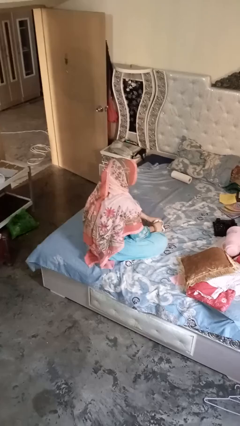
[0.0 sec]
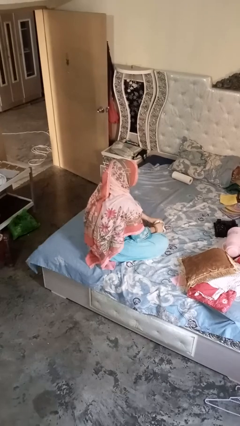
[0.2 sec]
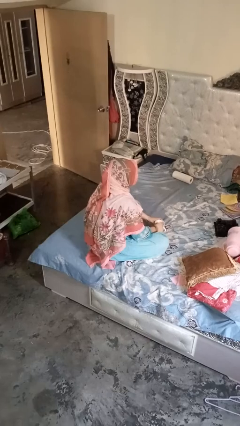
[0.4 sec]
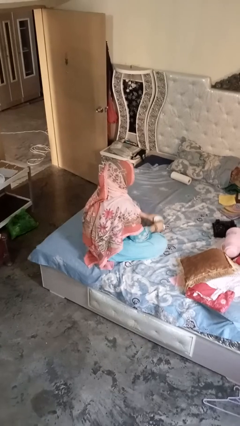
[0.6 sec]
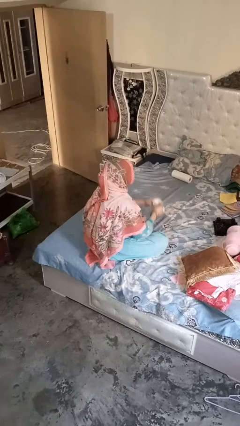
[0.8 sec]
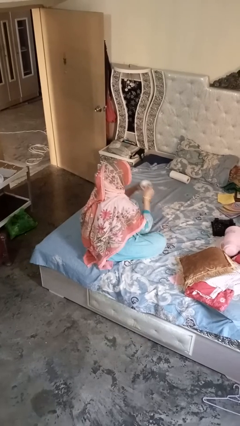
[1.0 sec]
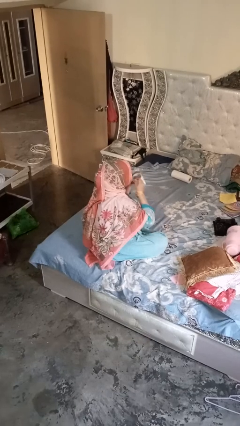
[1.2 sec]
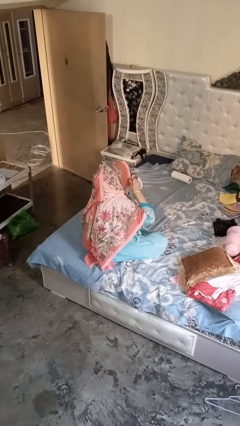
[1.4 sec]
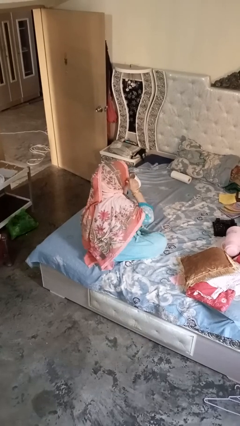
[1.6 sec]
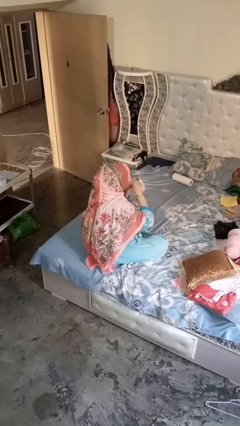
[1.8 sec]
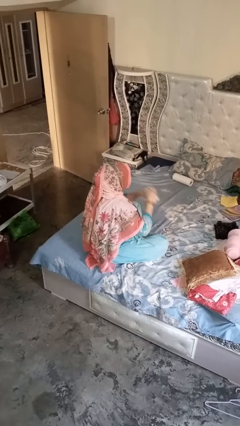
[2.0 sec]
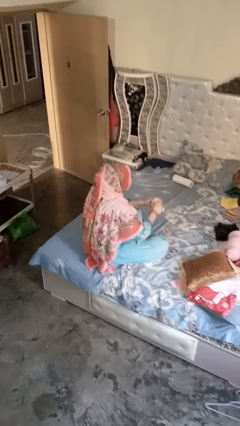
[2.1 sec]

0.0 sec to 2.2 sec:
person drinks from mug

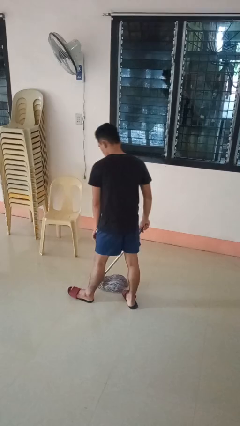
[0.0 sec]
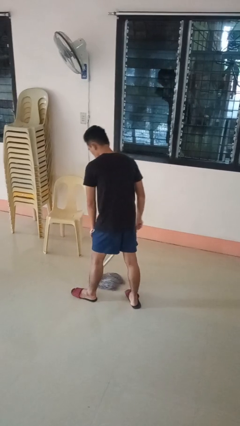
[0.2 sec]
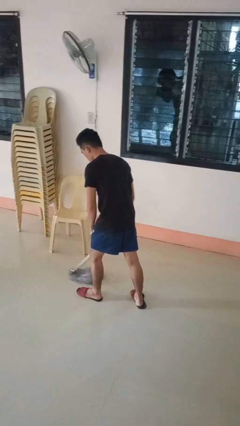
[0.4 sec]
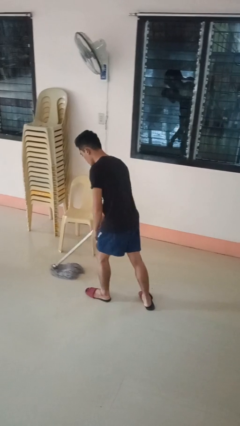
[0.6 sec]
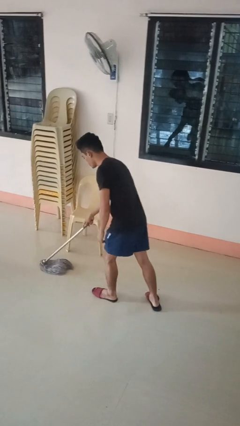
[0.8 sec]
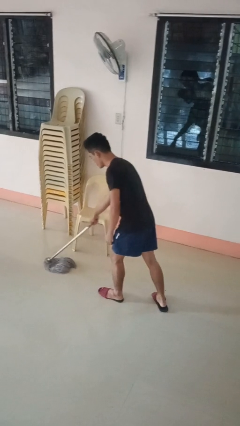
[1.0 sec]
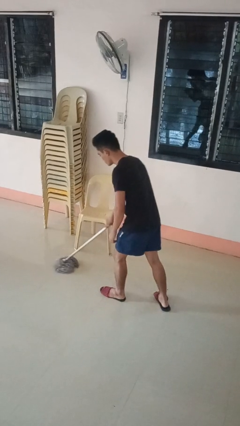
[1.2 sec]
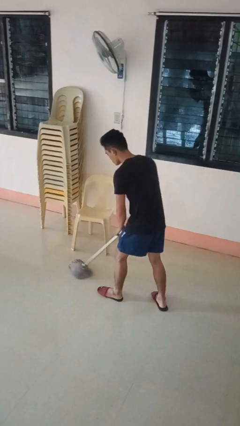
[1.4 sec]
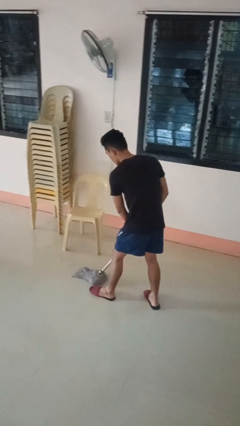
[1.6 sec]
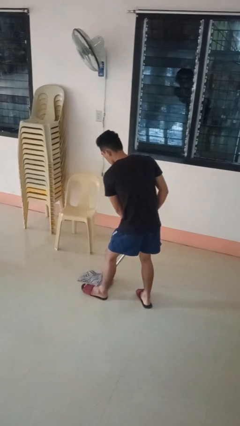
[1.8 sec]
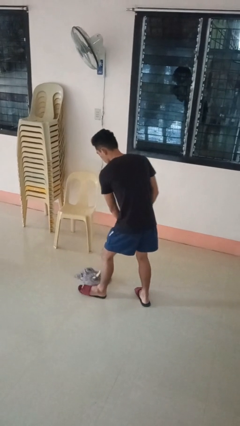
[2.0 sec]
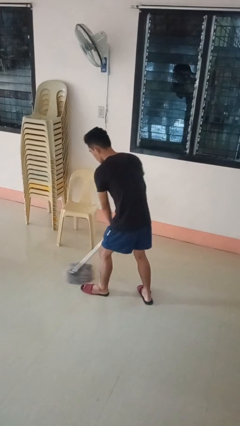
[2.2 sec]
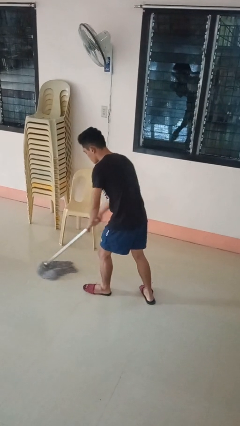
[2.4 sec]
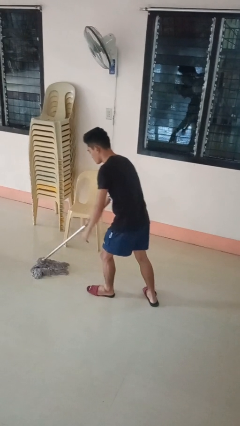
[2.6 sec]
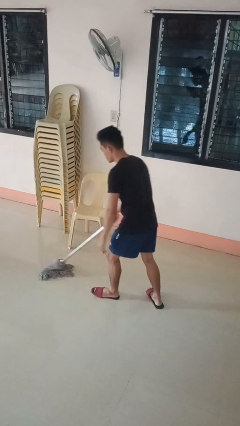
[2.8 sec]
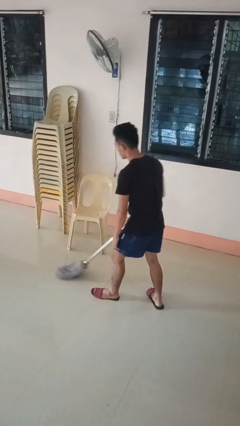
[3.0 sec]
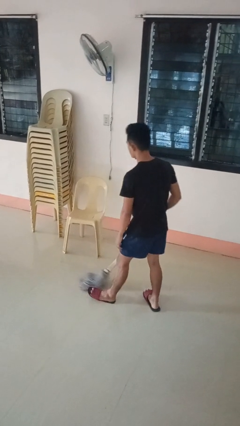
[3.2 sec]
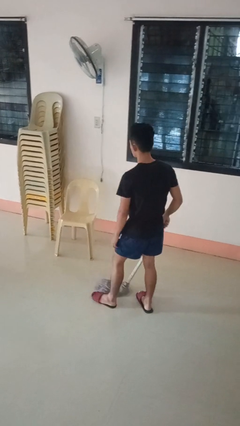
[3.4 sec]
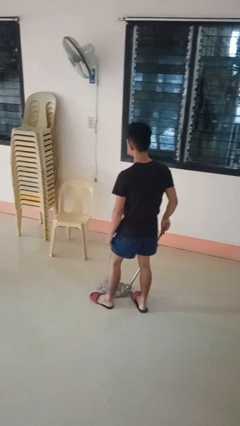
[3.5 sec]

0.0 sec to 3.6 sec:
person mops

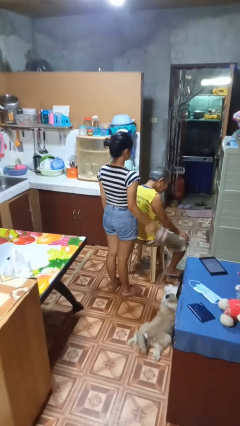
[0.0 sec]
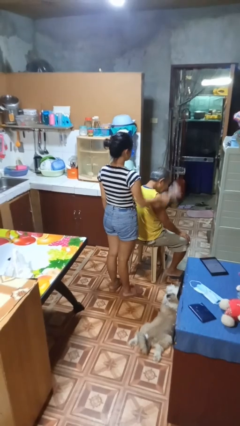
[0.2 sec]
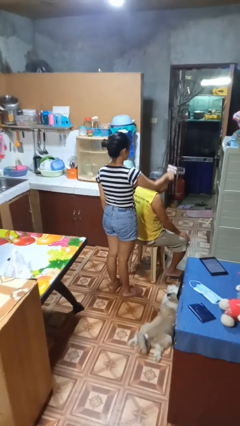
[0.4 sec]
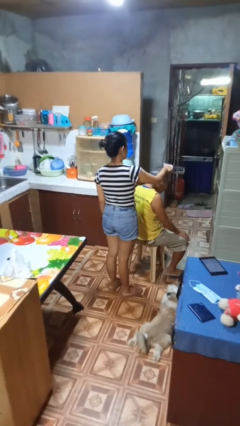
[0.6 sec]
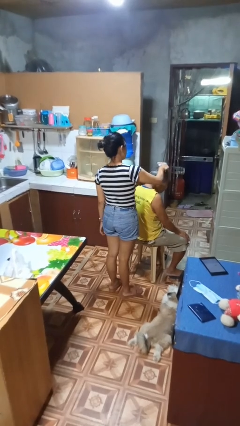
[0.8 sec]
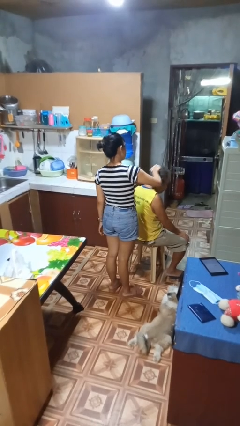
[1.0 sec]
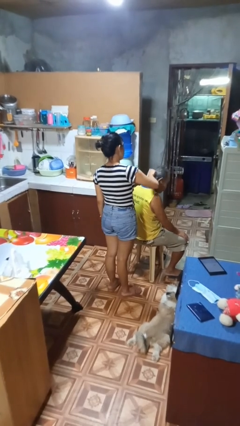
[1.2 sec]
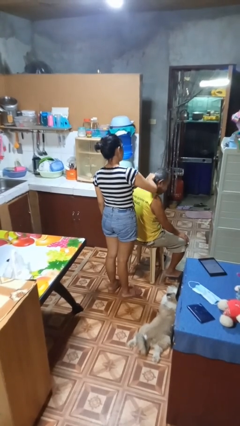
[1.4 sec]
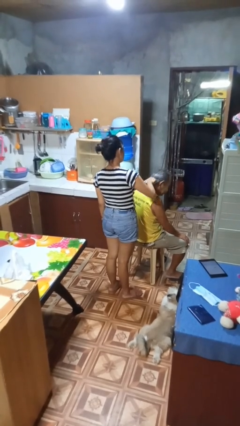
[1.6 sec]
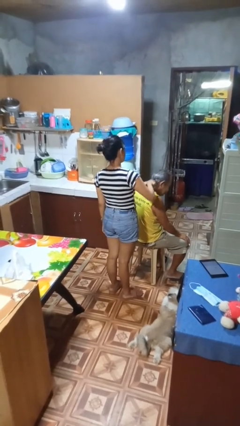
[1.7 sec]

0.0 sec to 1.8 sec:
person brushes hair of person

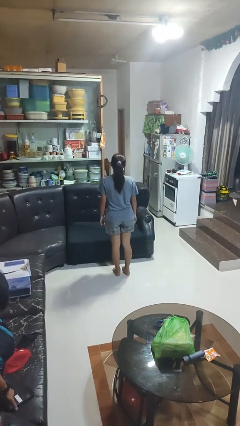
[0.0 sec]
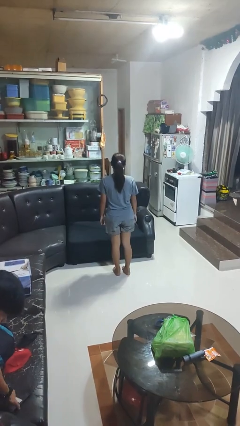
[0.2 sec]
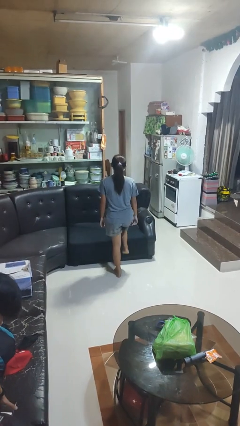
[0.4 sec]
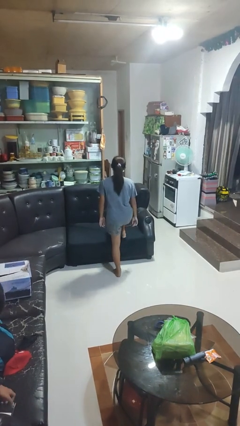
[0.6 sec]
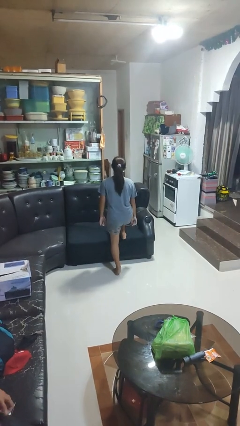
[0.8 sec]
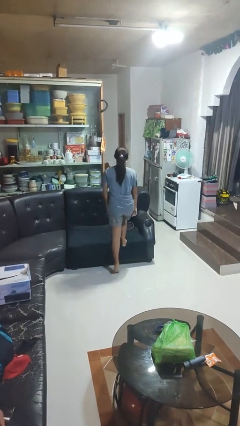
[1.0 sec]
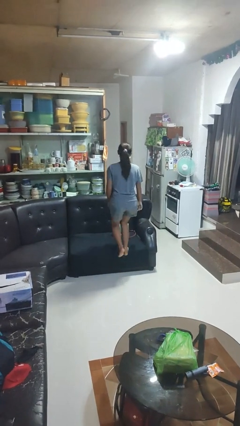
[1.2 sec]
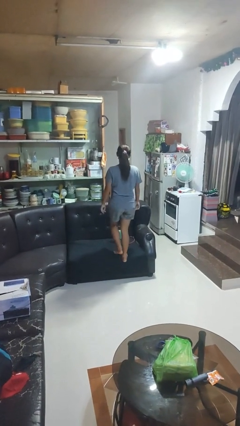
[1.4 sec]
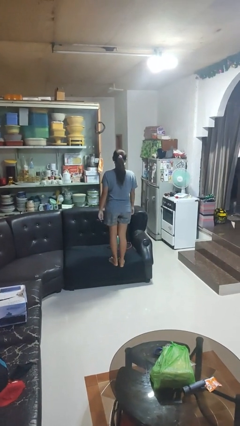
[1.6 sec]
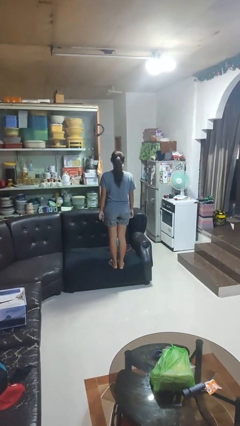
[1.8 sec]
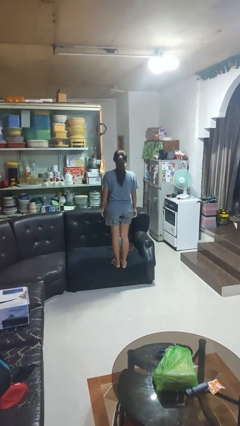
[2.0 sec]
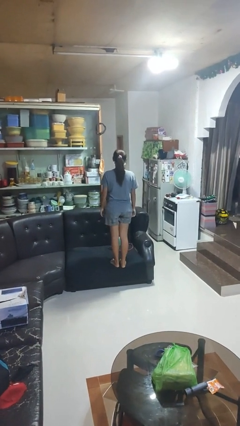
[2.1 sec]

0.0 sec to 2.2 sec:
person climbs on couch

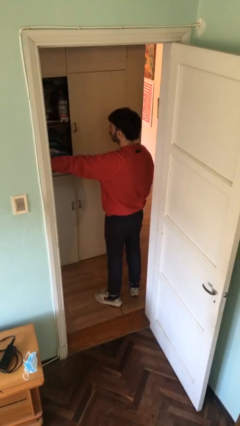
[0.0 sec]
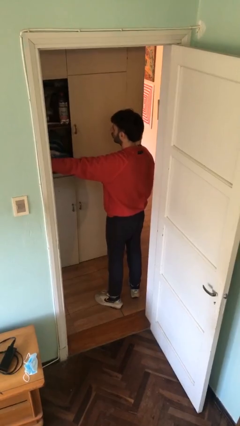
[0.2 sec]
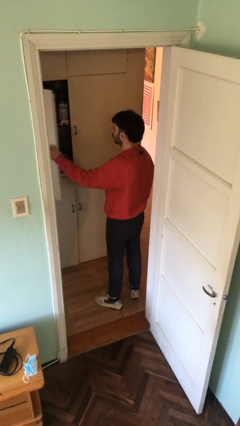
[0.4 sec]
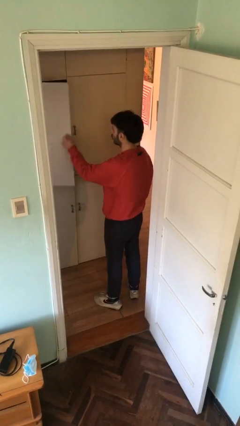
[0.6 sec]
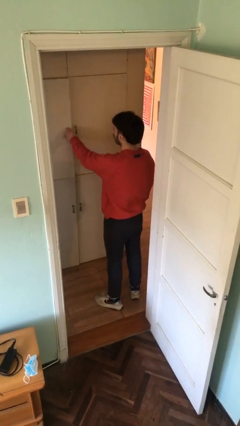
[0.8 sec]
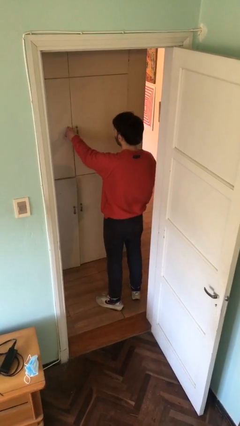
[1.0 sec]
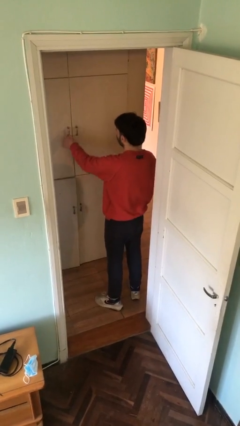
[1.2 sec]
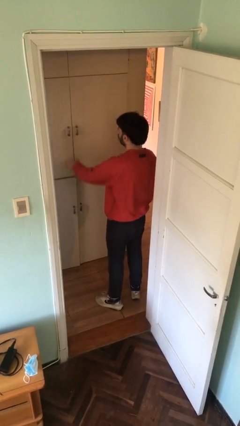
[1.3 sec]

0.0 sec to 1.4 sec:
person closes closet door

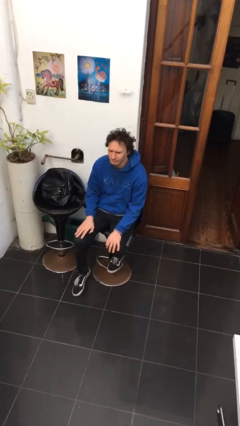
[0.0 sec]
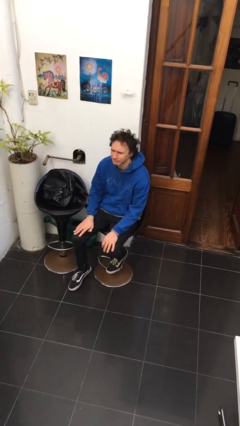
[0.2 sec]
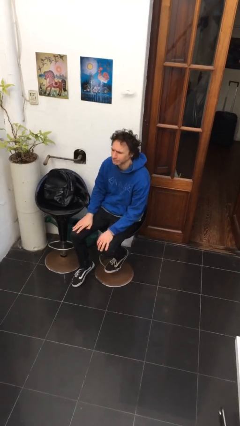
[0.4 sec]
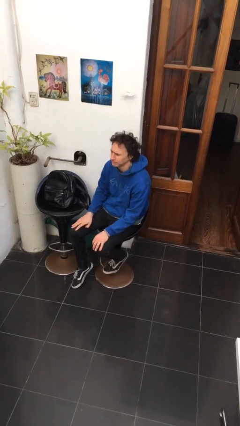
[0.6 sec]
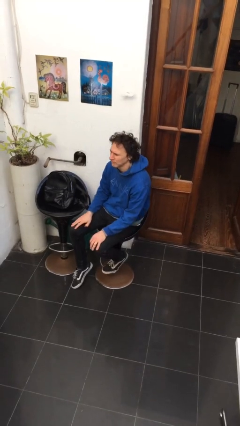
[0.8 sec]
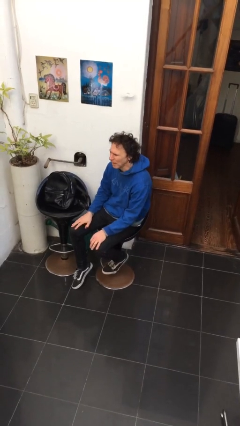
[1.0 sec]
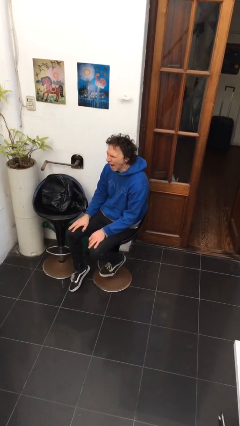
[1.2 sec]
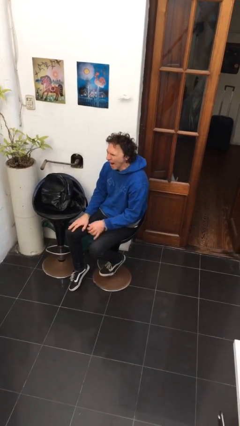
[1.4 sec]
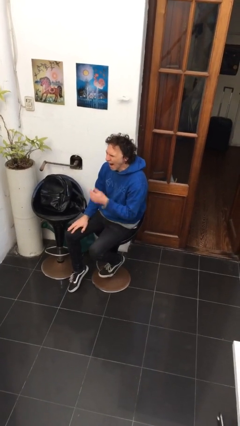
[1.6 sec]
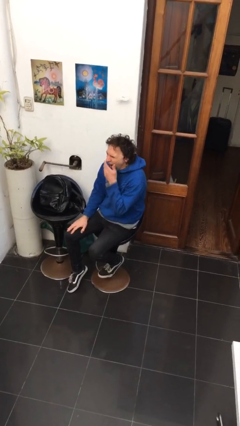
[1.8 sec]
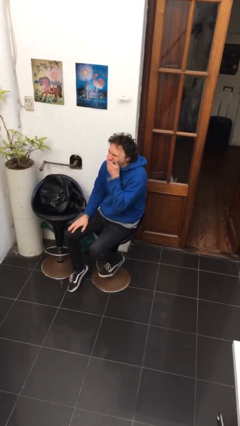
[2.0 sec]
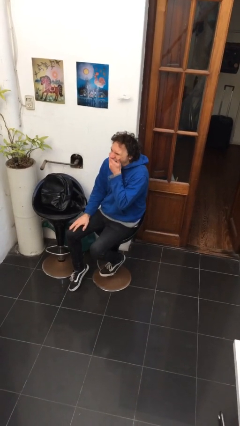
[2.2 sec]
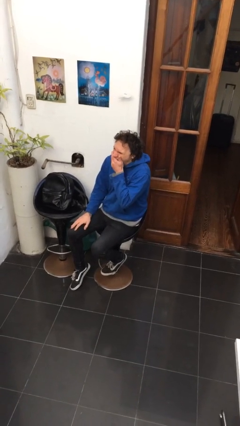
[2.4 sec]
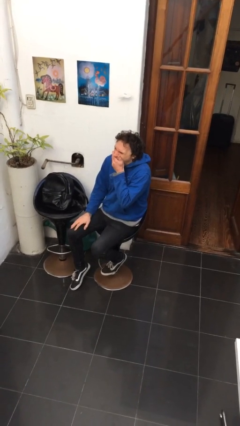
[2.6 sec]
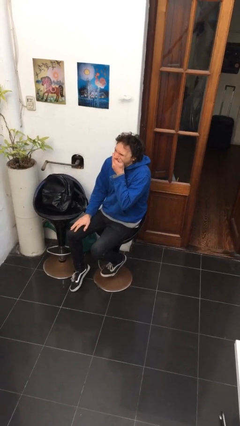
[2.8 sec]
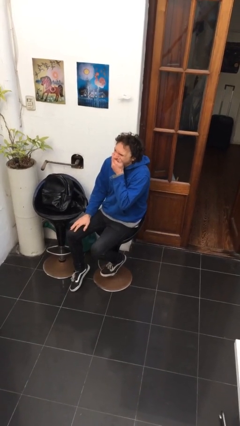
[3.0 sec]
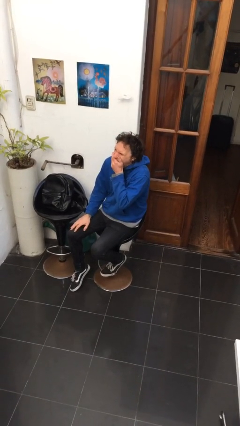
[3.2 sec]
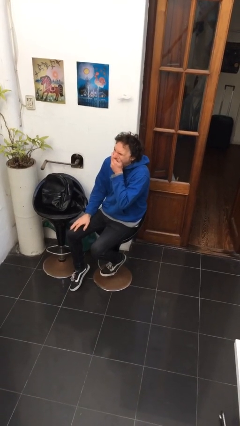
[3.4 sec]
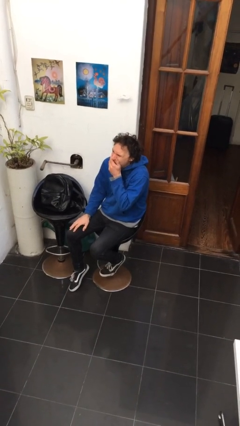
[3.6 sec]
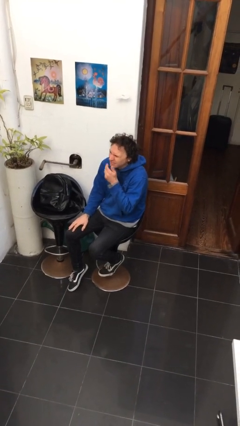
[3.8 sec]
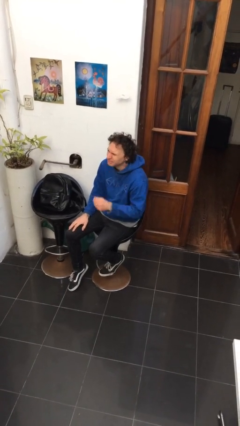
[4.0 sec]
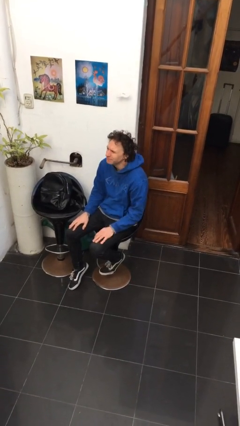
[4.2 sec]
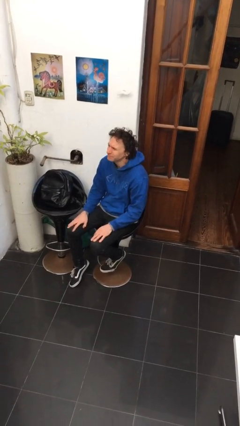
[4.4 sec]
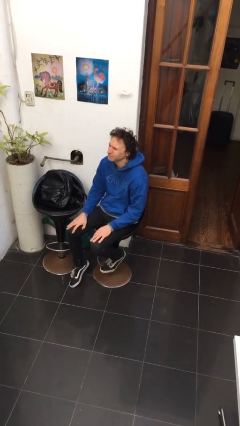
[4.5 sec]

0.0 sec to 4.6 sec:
person yawns

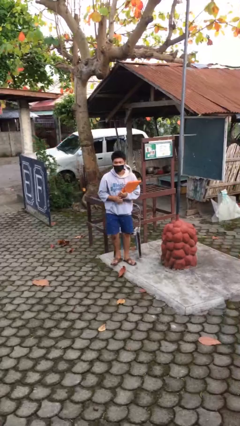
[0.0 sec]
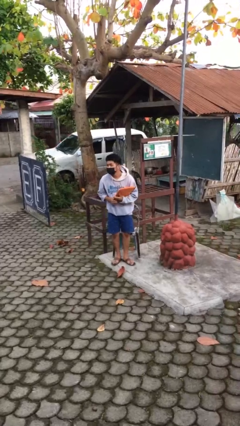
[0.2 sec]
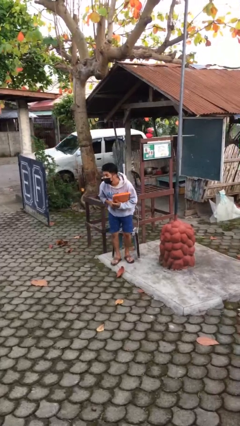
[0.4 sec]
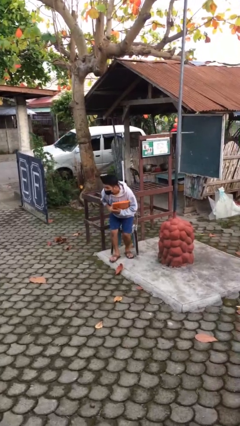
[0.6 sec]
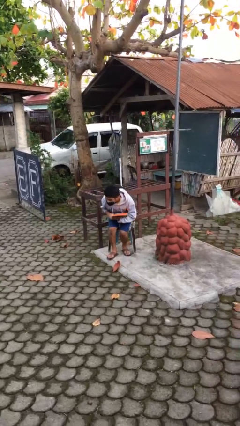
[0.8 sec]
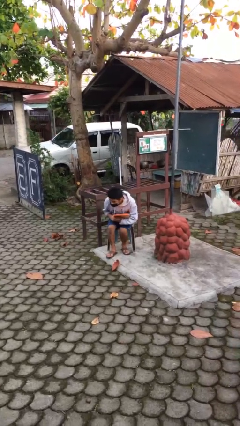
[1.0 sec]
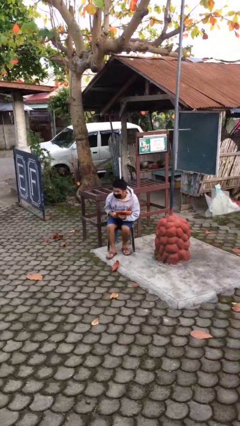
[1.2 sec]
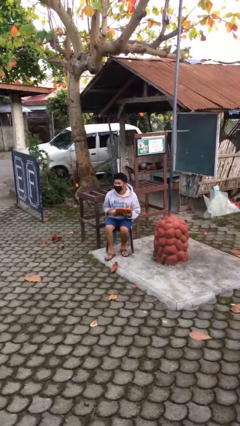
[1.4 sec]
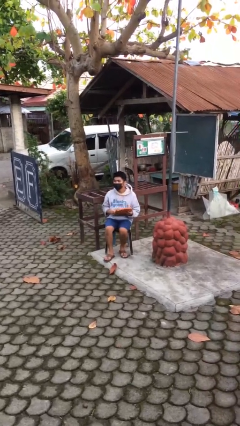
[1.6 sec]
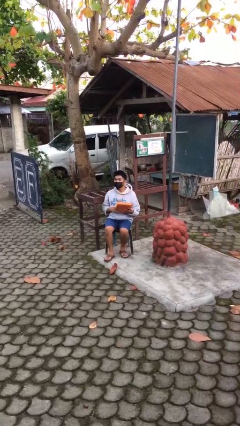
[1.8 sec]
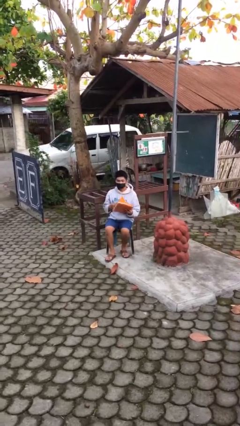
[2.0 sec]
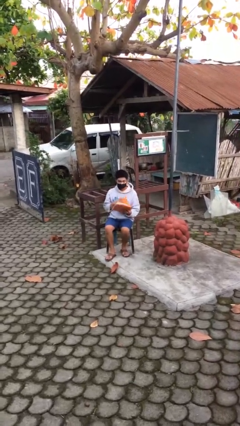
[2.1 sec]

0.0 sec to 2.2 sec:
person sits down
